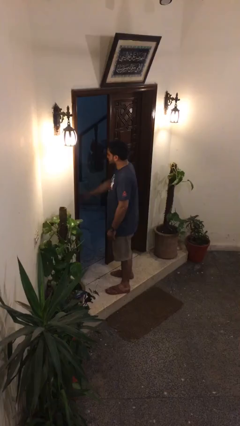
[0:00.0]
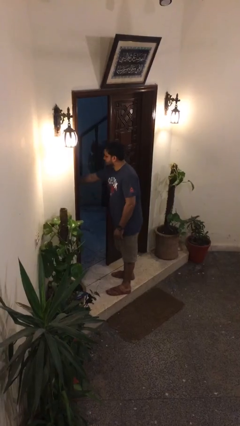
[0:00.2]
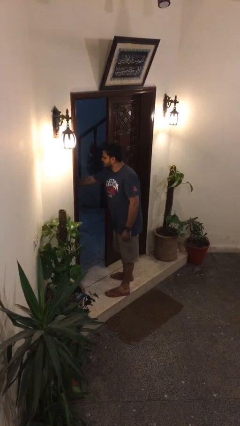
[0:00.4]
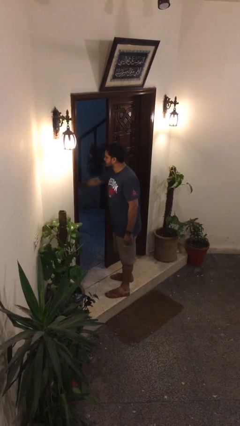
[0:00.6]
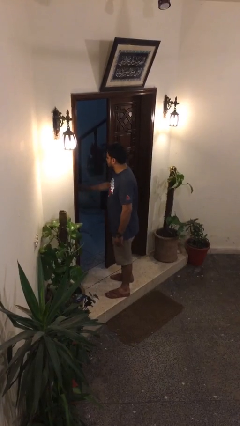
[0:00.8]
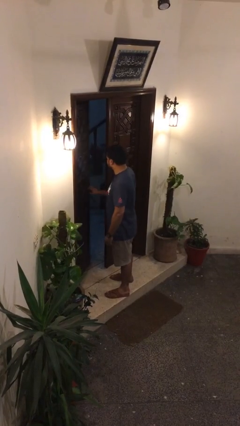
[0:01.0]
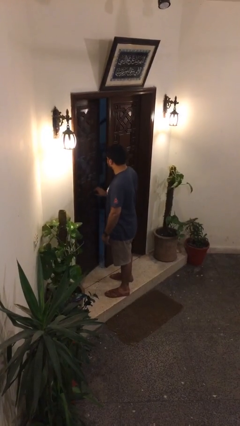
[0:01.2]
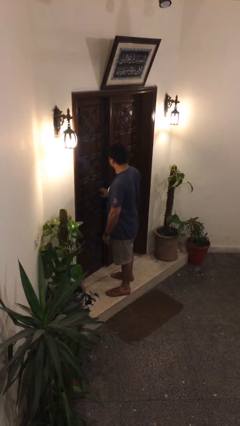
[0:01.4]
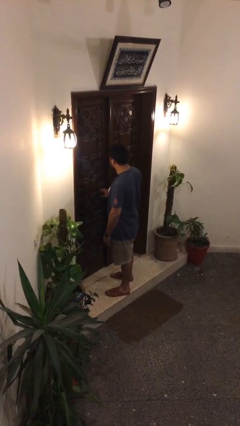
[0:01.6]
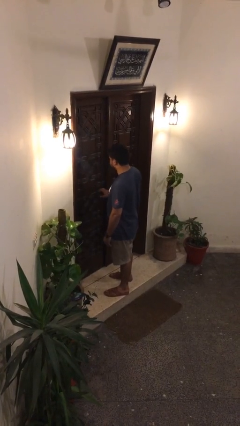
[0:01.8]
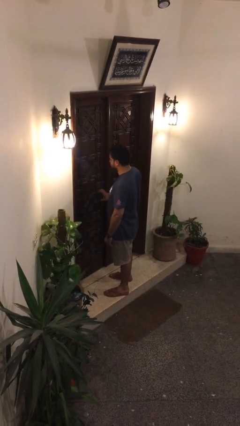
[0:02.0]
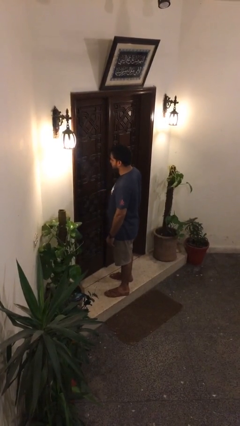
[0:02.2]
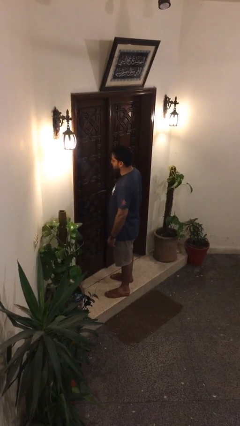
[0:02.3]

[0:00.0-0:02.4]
person closes facility door

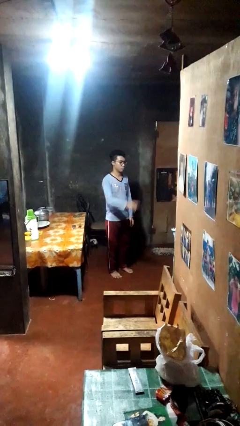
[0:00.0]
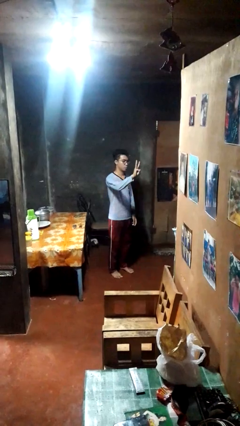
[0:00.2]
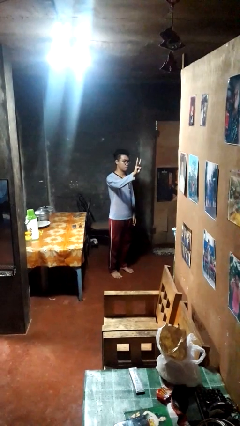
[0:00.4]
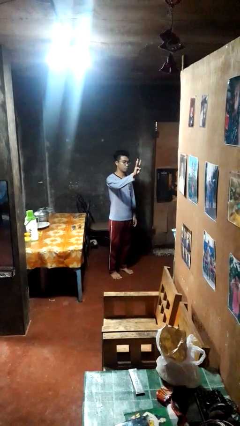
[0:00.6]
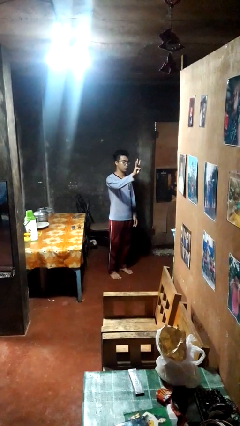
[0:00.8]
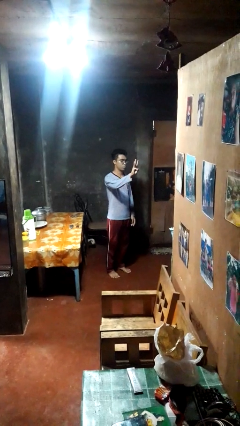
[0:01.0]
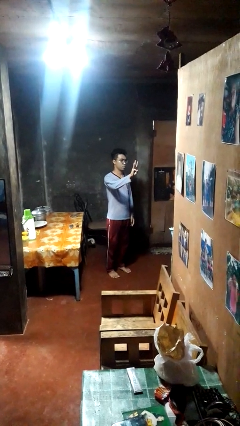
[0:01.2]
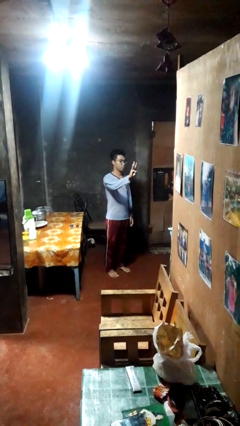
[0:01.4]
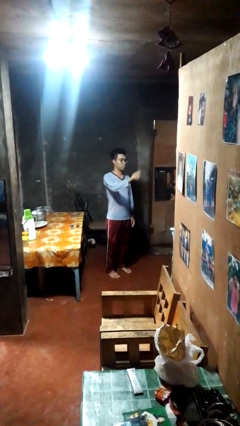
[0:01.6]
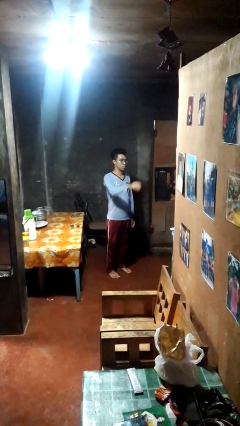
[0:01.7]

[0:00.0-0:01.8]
person gestures number three

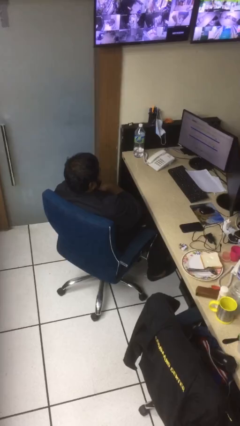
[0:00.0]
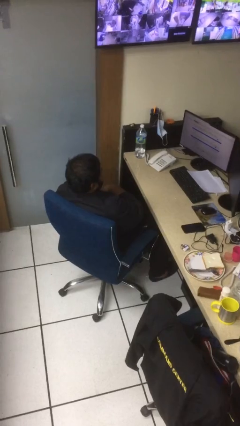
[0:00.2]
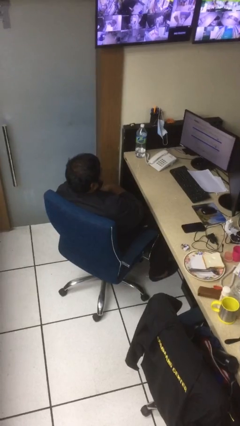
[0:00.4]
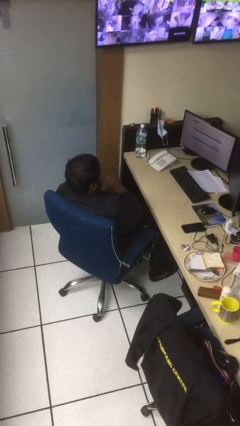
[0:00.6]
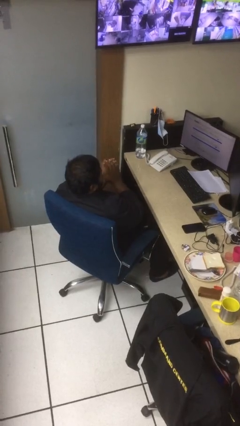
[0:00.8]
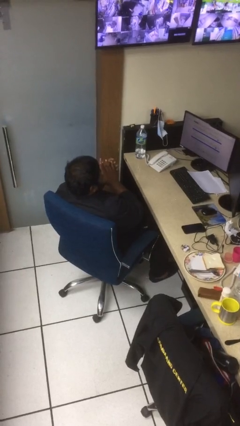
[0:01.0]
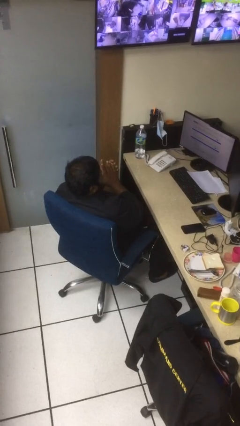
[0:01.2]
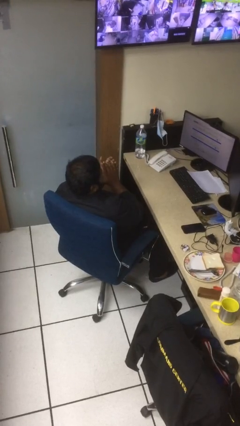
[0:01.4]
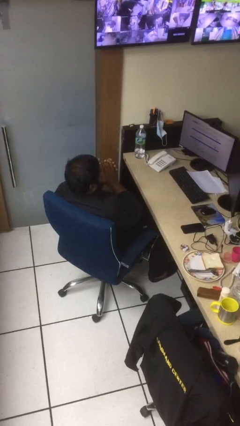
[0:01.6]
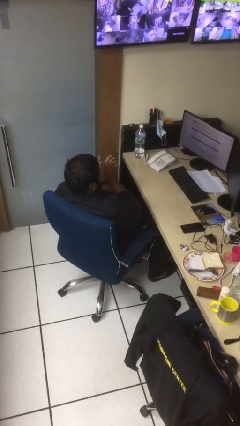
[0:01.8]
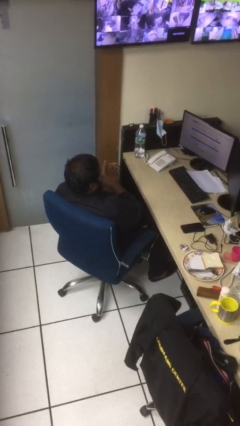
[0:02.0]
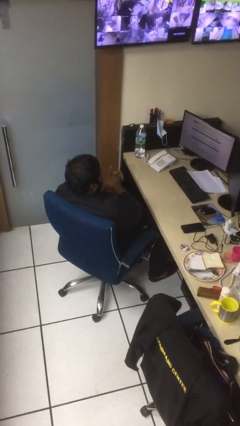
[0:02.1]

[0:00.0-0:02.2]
person claps hands

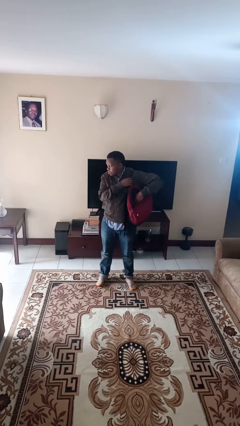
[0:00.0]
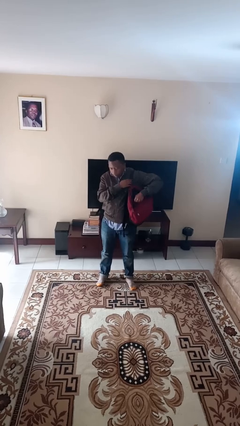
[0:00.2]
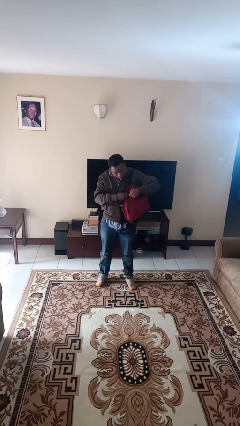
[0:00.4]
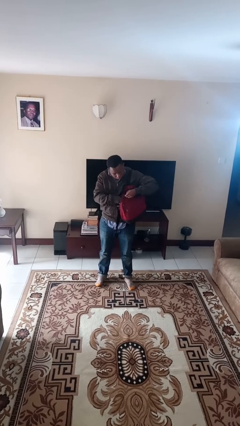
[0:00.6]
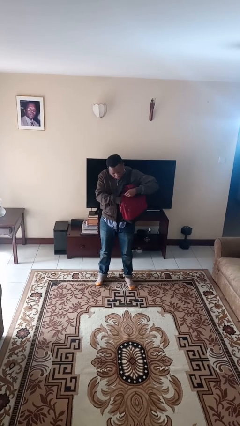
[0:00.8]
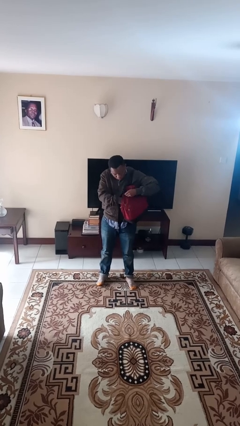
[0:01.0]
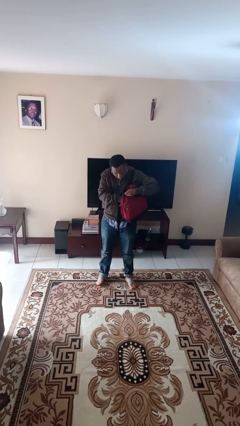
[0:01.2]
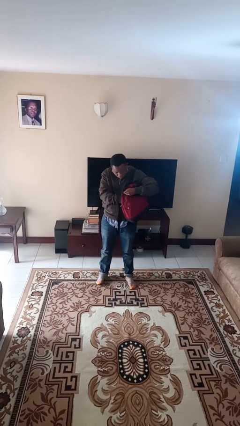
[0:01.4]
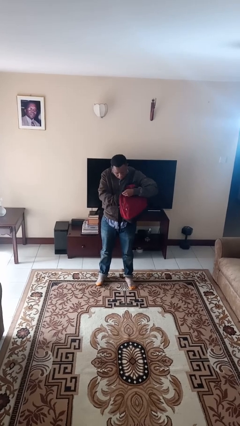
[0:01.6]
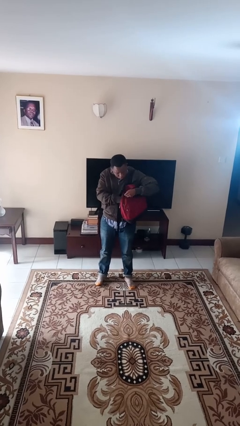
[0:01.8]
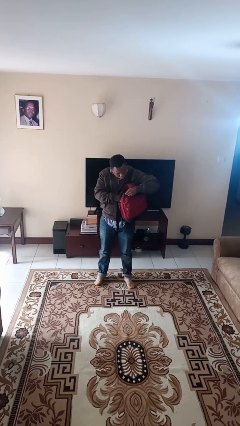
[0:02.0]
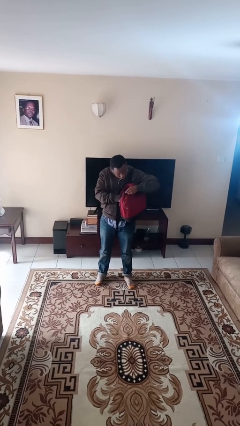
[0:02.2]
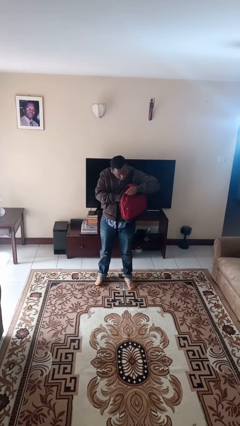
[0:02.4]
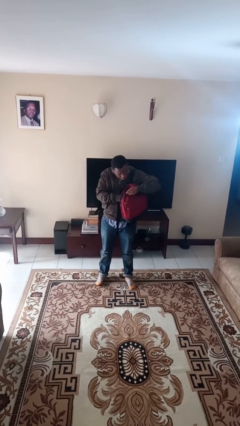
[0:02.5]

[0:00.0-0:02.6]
person searches in backpack

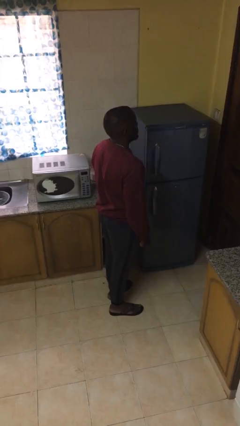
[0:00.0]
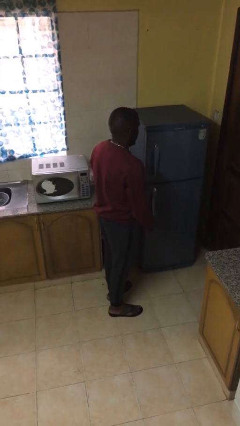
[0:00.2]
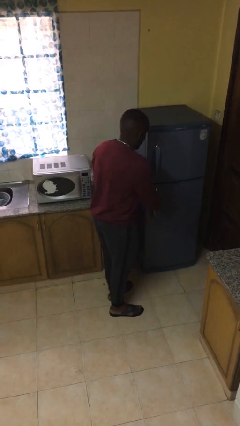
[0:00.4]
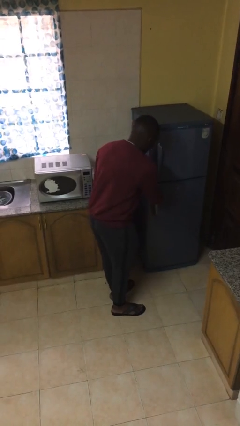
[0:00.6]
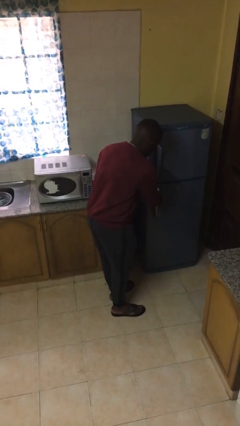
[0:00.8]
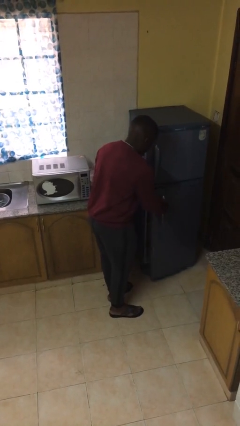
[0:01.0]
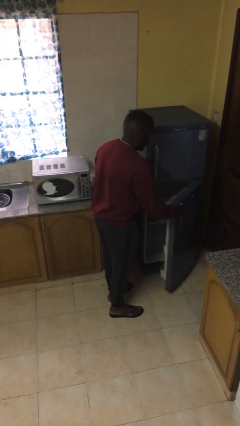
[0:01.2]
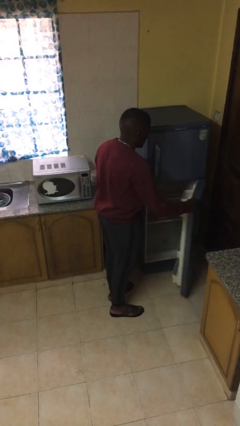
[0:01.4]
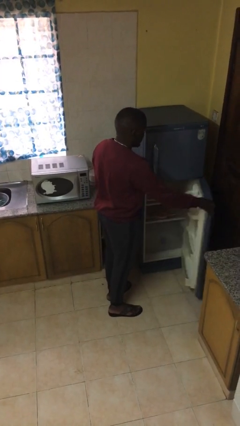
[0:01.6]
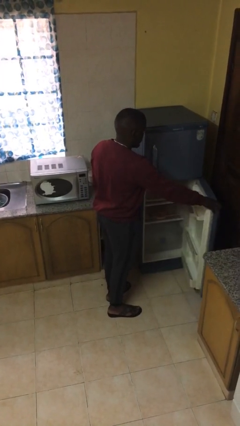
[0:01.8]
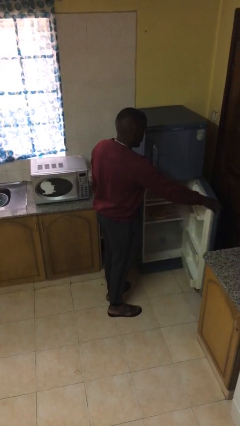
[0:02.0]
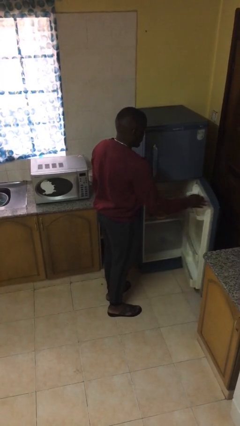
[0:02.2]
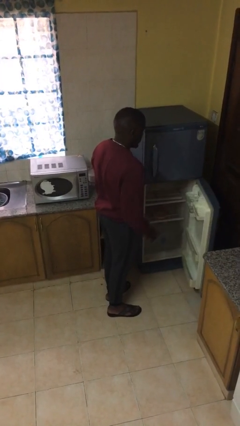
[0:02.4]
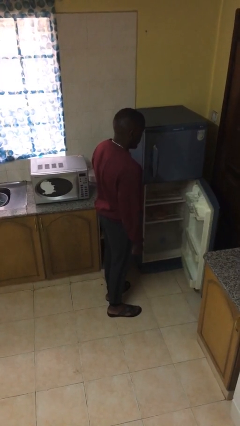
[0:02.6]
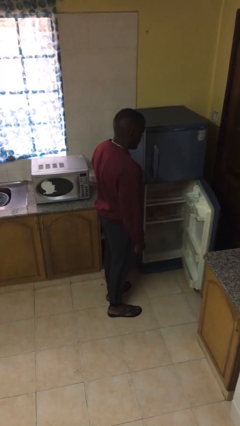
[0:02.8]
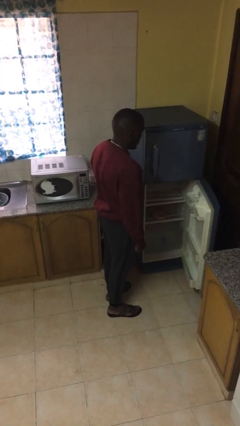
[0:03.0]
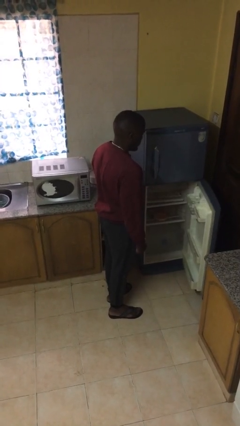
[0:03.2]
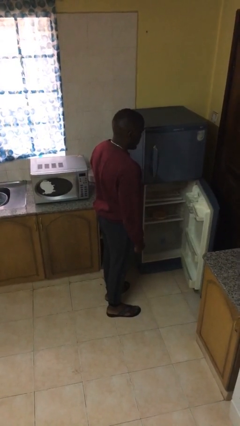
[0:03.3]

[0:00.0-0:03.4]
person opens refrigerator

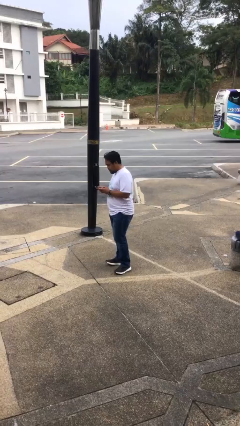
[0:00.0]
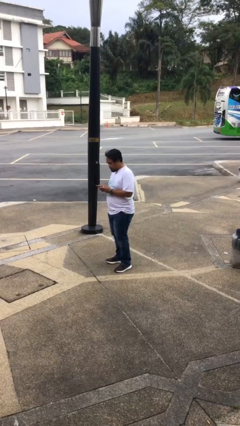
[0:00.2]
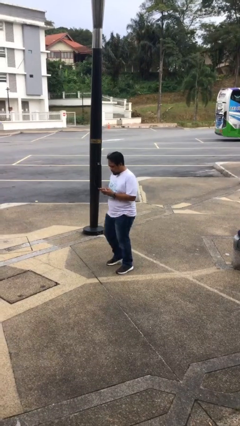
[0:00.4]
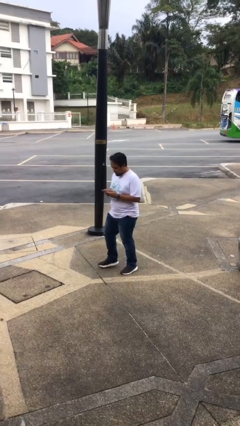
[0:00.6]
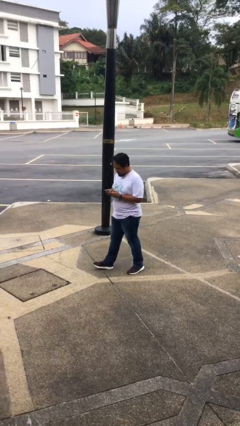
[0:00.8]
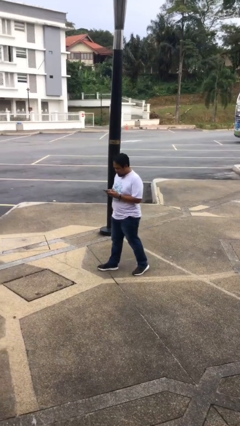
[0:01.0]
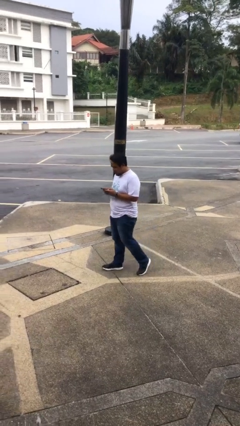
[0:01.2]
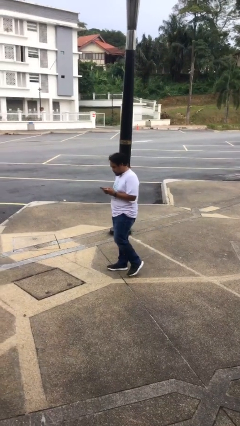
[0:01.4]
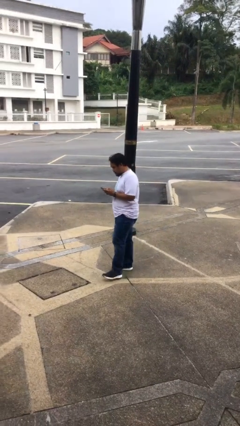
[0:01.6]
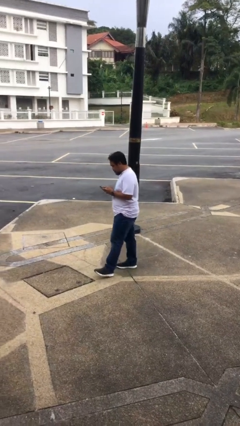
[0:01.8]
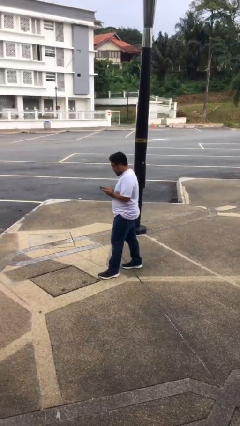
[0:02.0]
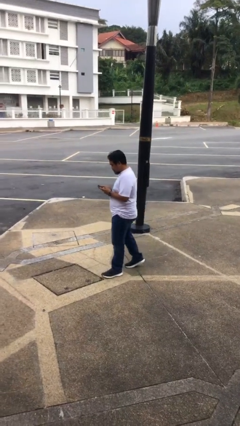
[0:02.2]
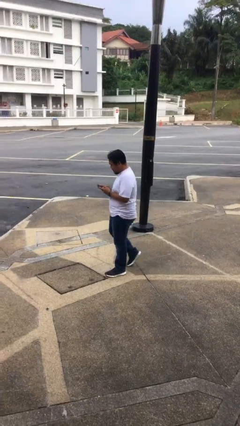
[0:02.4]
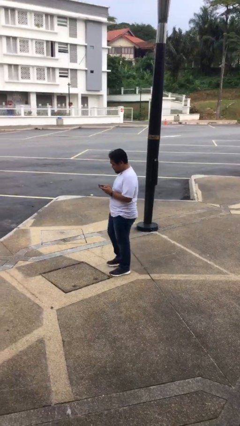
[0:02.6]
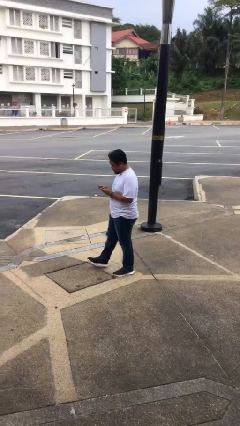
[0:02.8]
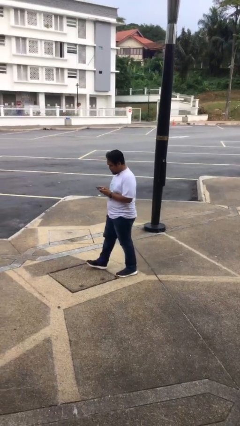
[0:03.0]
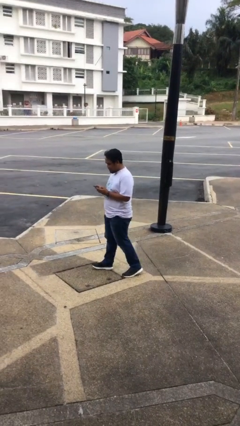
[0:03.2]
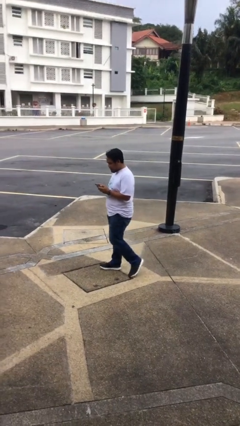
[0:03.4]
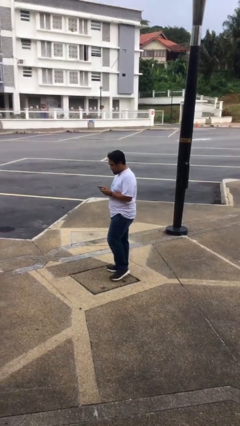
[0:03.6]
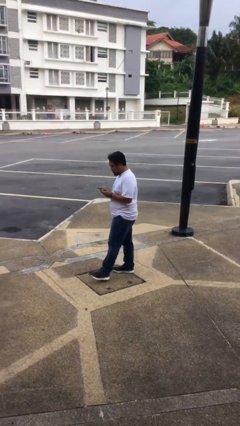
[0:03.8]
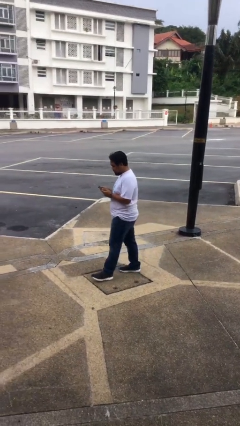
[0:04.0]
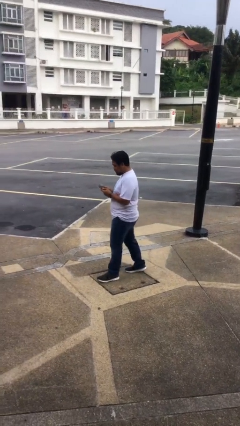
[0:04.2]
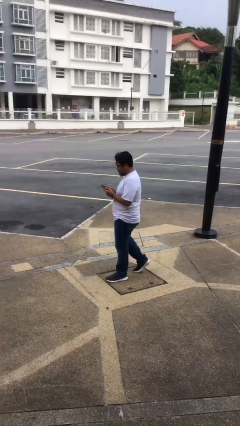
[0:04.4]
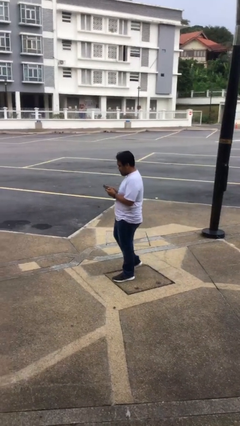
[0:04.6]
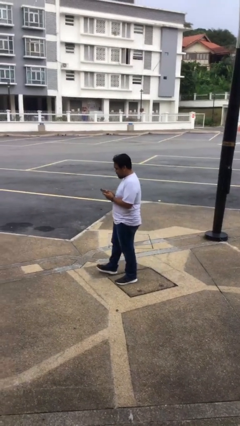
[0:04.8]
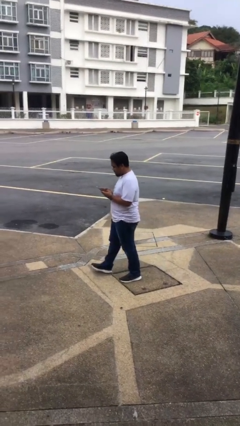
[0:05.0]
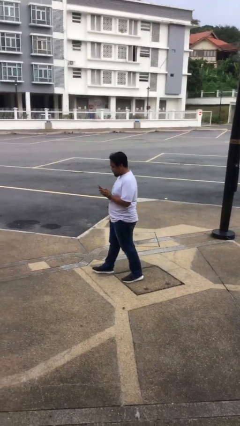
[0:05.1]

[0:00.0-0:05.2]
person texts on phone
